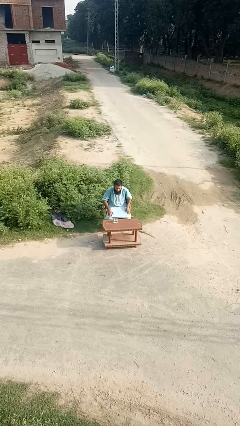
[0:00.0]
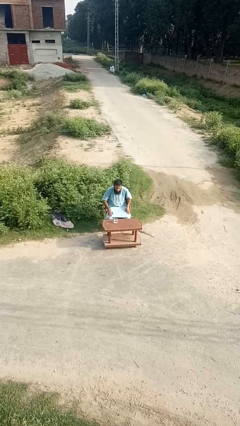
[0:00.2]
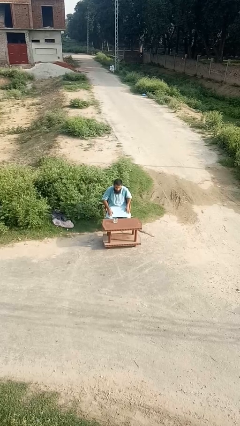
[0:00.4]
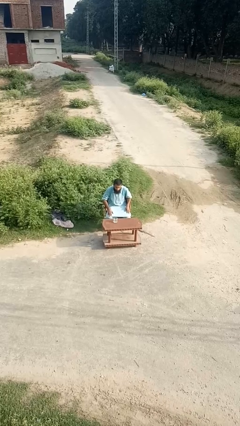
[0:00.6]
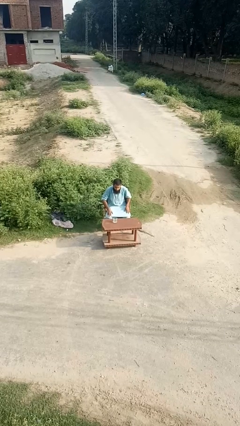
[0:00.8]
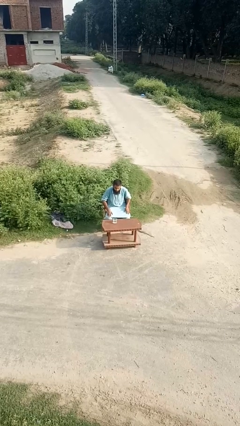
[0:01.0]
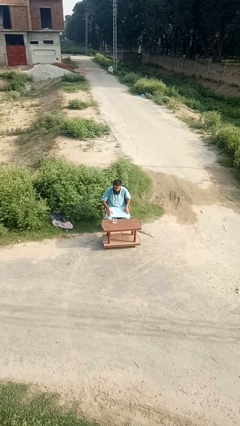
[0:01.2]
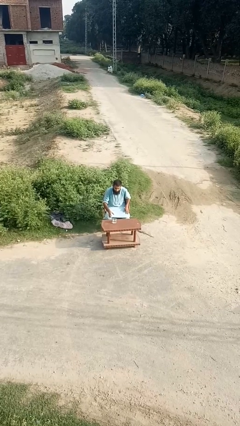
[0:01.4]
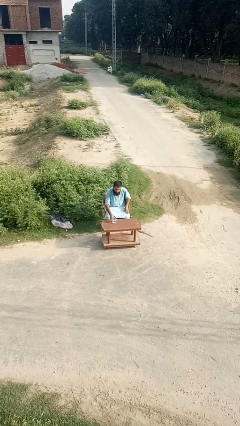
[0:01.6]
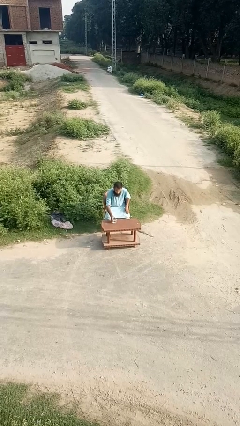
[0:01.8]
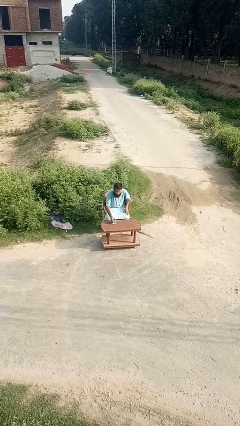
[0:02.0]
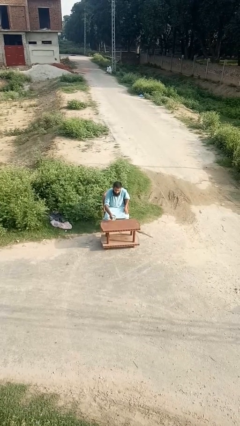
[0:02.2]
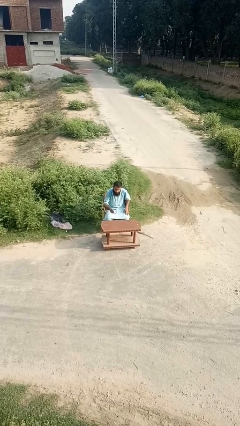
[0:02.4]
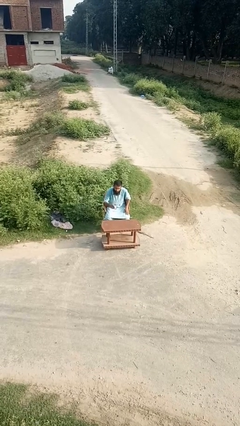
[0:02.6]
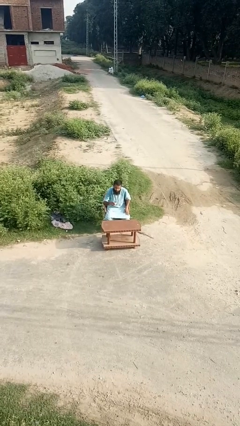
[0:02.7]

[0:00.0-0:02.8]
person picks up object from table

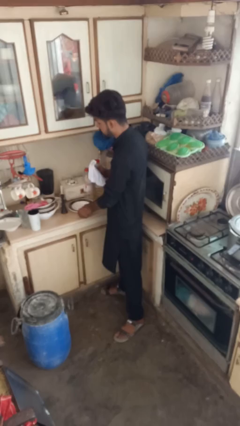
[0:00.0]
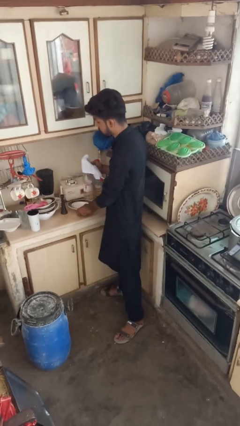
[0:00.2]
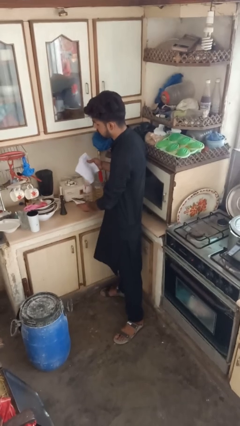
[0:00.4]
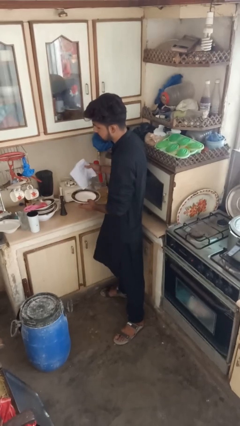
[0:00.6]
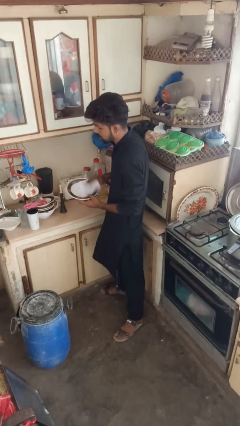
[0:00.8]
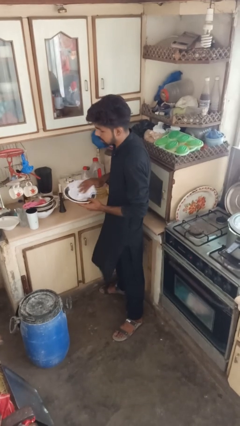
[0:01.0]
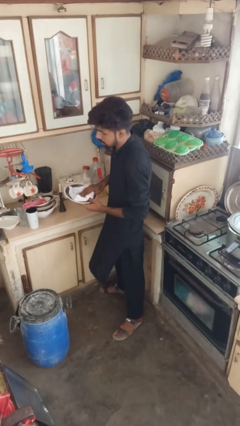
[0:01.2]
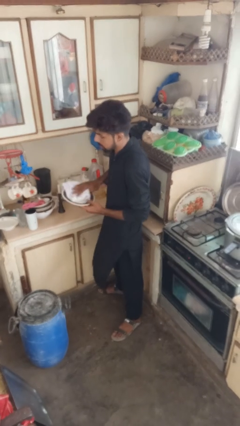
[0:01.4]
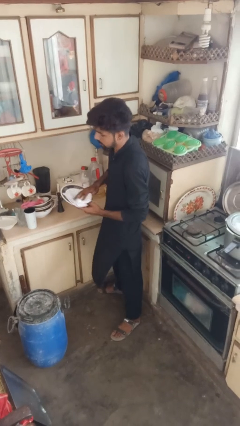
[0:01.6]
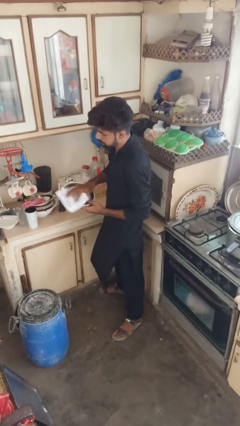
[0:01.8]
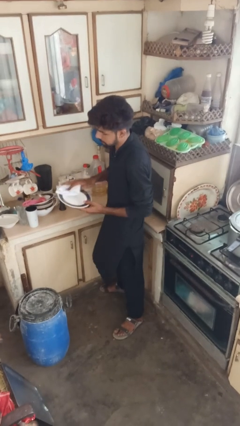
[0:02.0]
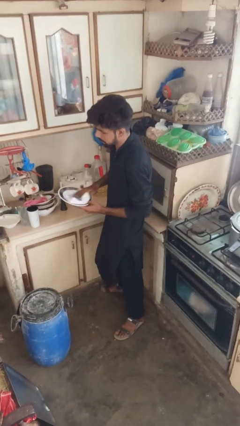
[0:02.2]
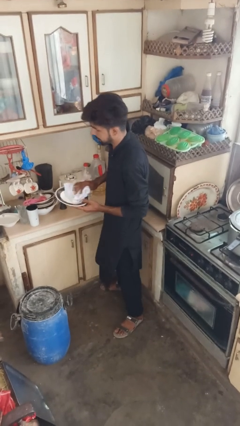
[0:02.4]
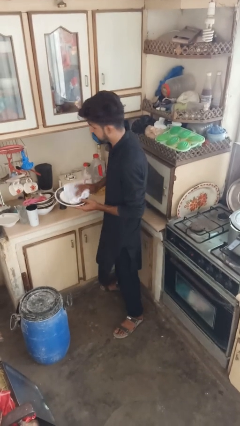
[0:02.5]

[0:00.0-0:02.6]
person dries dish

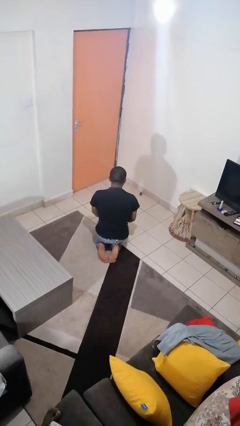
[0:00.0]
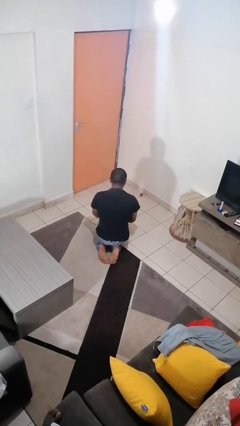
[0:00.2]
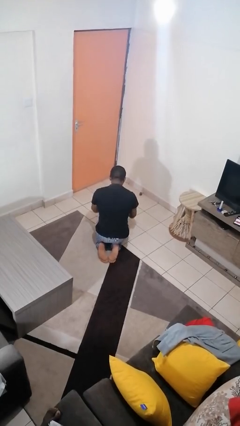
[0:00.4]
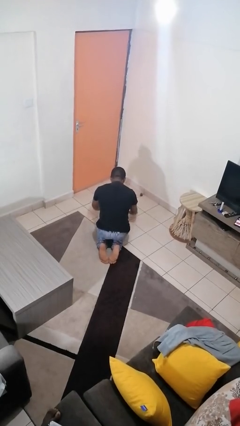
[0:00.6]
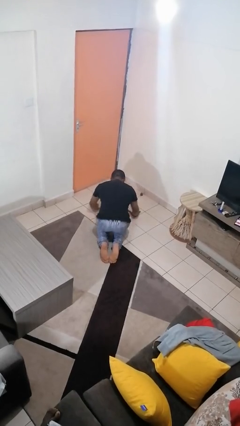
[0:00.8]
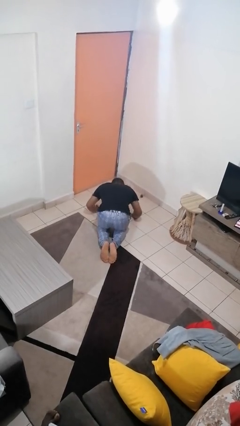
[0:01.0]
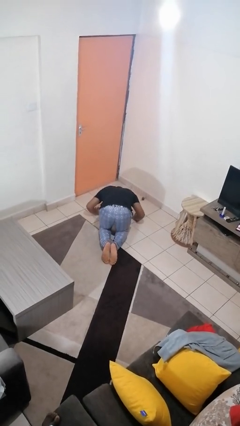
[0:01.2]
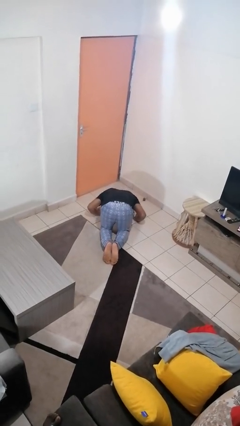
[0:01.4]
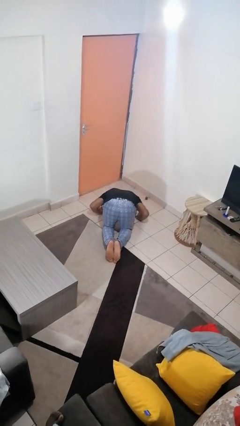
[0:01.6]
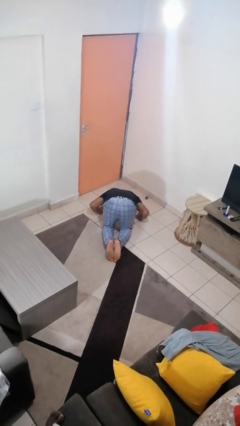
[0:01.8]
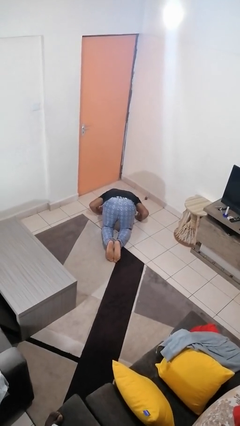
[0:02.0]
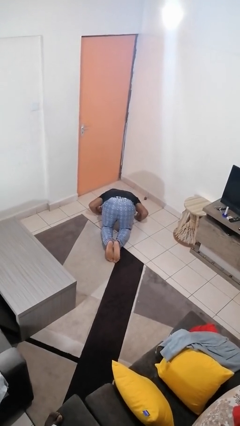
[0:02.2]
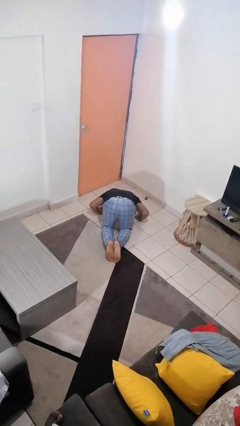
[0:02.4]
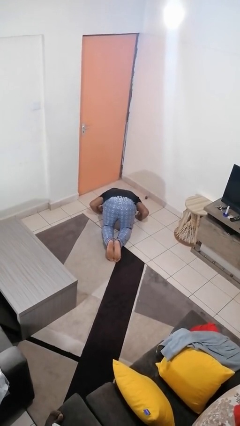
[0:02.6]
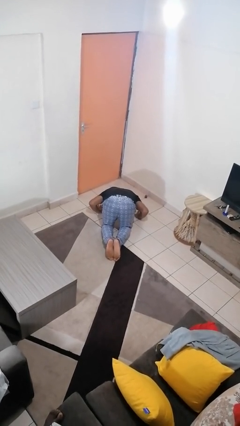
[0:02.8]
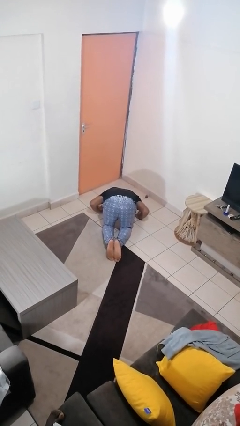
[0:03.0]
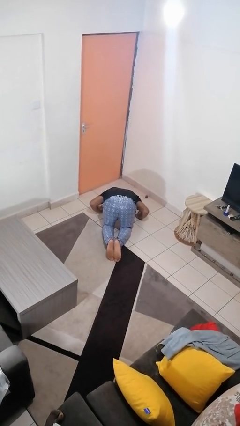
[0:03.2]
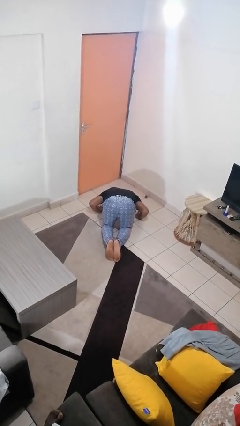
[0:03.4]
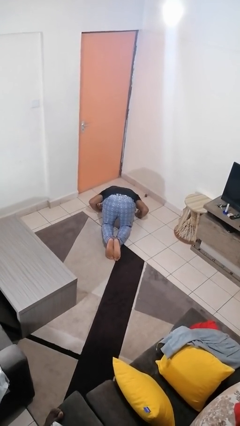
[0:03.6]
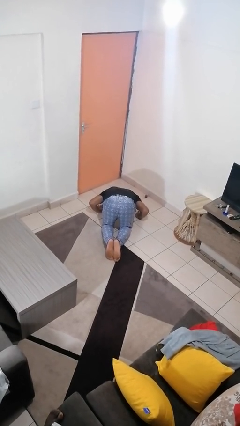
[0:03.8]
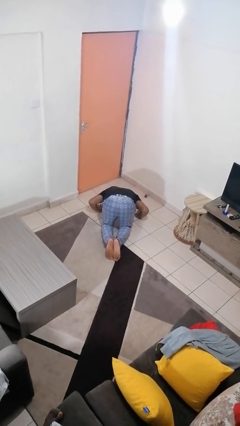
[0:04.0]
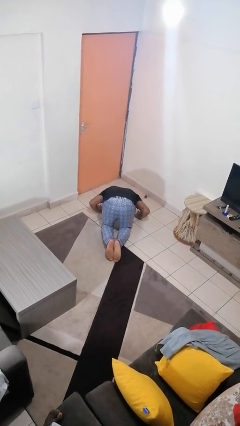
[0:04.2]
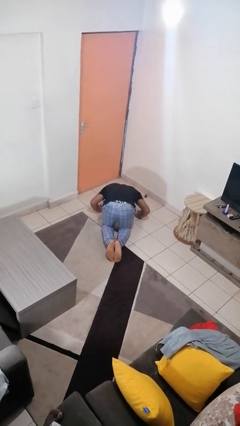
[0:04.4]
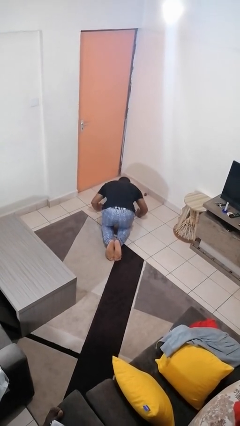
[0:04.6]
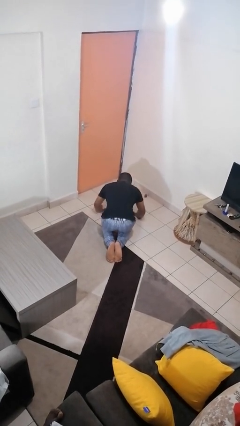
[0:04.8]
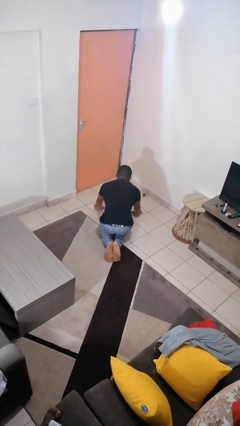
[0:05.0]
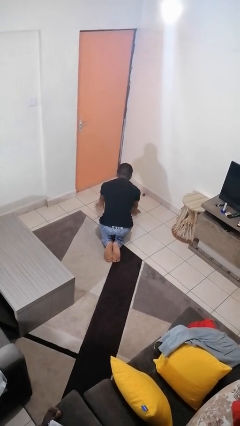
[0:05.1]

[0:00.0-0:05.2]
person prays

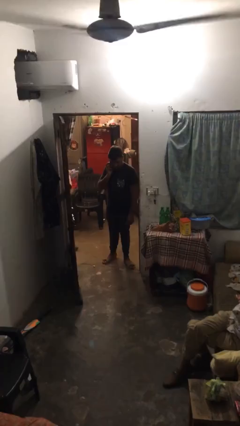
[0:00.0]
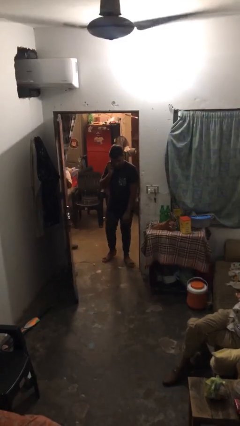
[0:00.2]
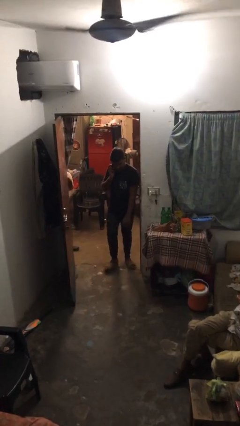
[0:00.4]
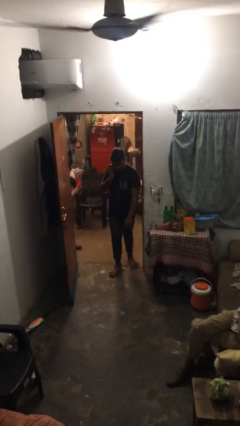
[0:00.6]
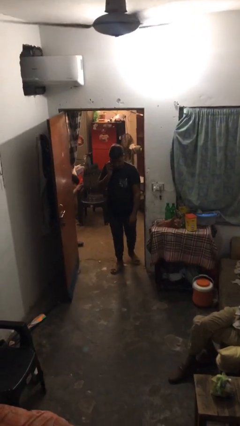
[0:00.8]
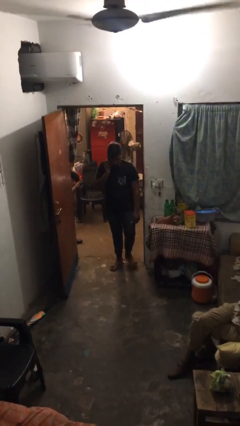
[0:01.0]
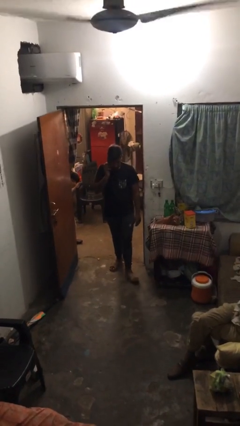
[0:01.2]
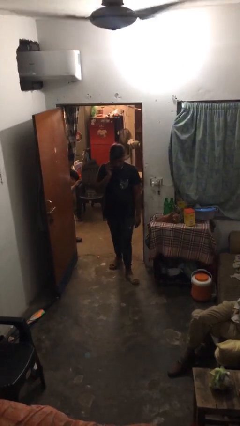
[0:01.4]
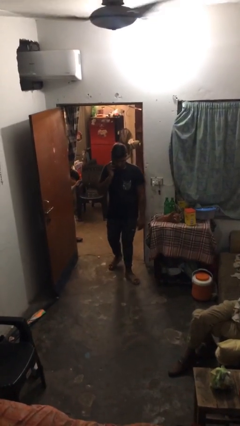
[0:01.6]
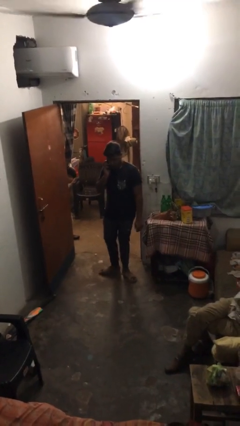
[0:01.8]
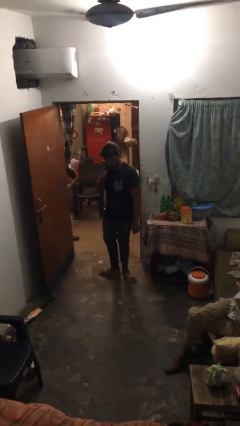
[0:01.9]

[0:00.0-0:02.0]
person enters scene through structure

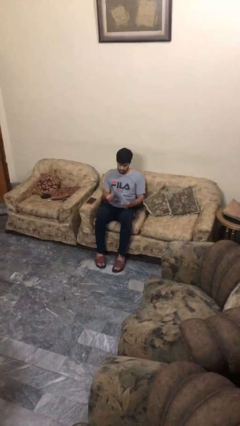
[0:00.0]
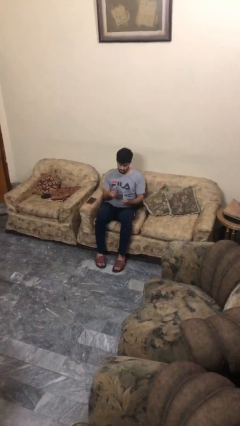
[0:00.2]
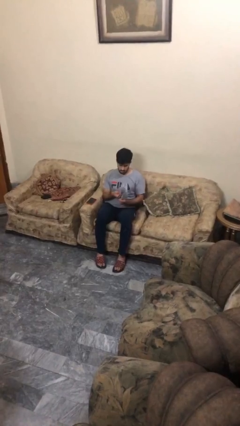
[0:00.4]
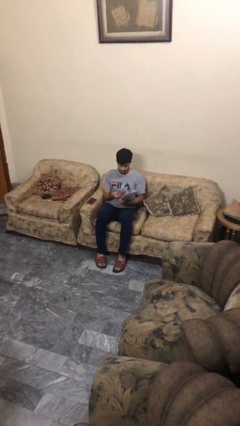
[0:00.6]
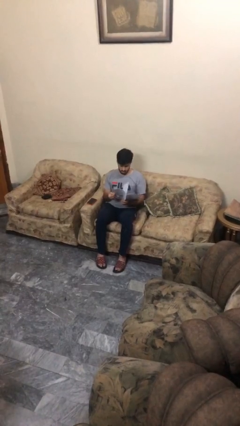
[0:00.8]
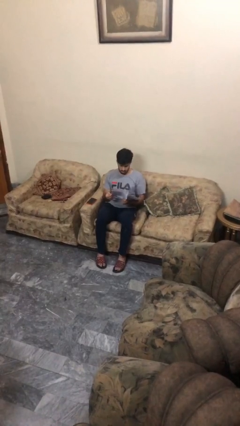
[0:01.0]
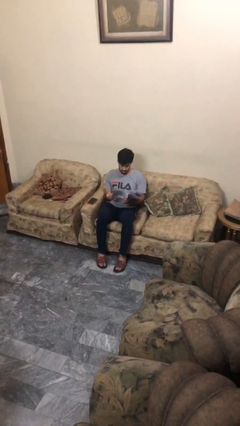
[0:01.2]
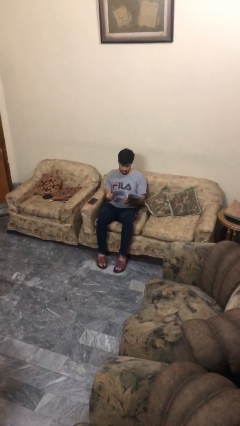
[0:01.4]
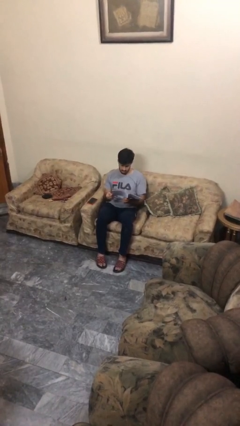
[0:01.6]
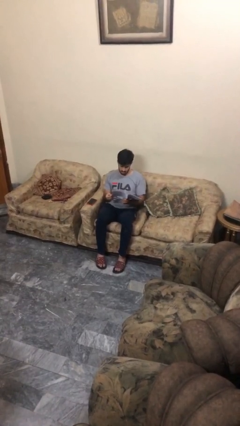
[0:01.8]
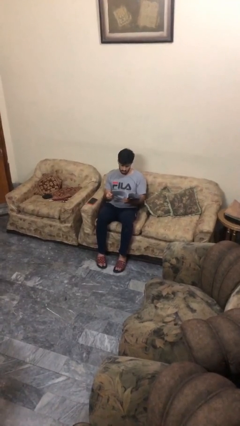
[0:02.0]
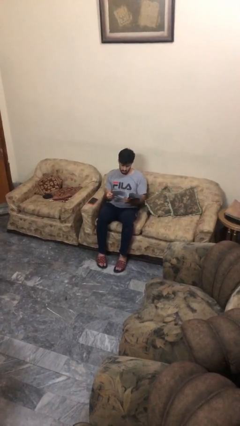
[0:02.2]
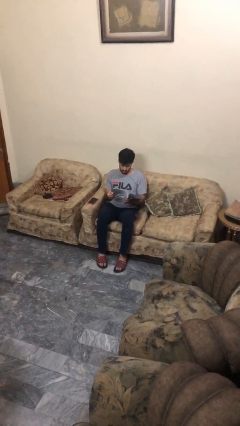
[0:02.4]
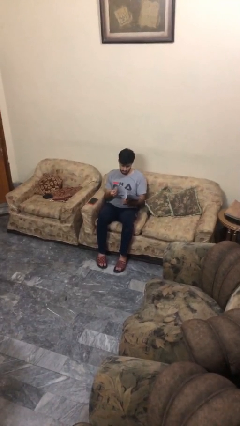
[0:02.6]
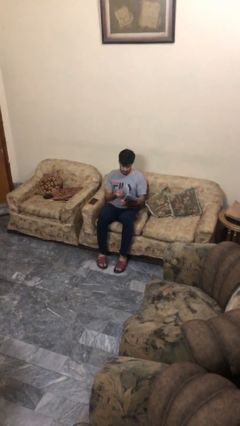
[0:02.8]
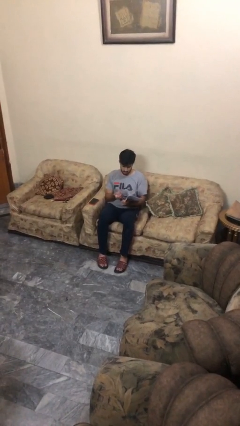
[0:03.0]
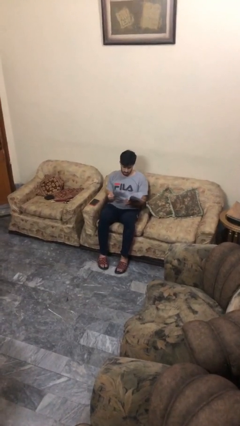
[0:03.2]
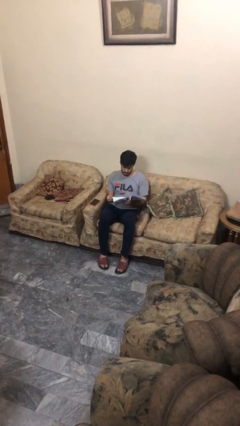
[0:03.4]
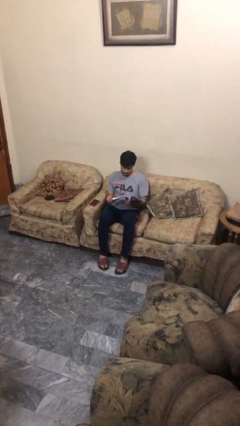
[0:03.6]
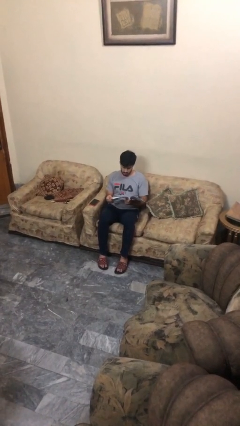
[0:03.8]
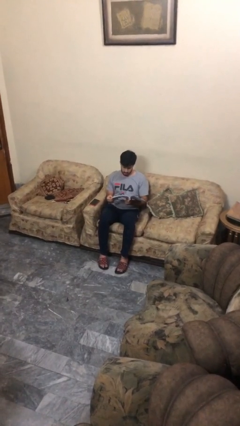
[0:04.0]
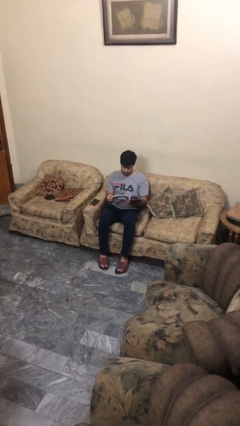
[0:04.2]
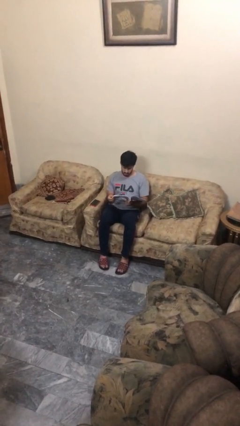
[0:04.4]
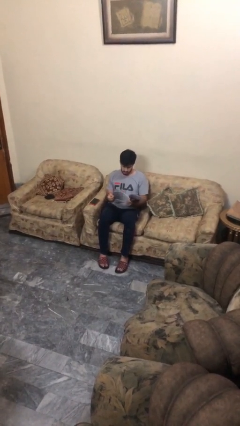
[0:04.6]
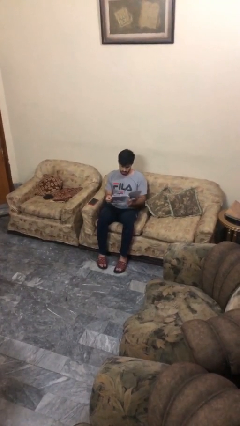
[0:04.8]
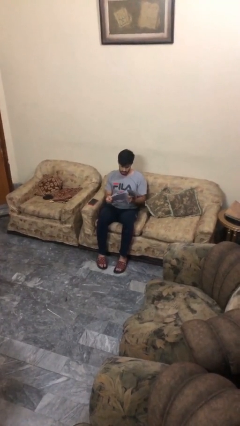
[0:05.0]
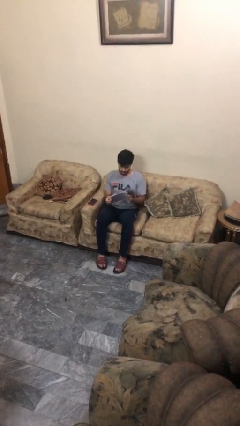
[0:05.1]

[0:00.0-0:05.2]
person reads magazine
